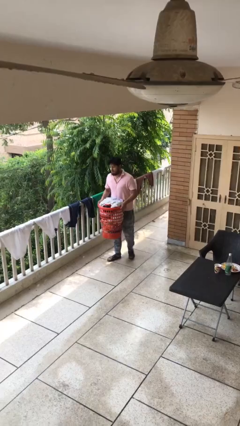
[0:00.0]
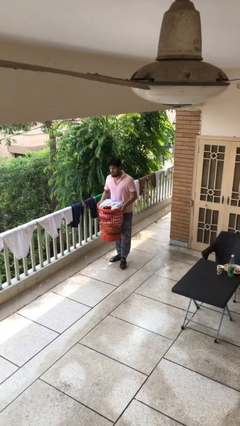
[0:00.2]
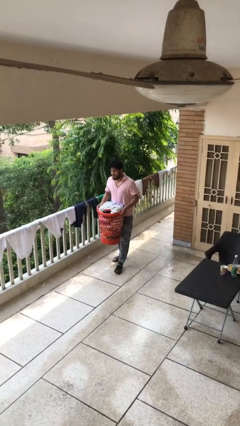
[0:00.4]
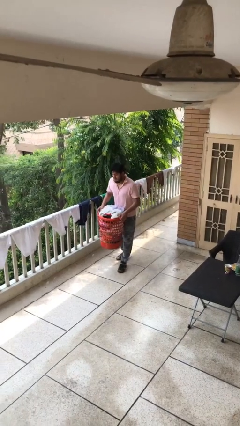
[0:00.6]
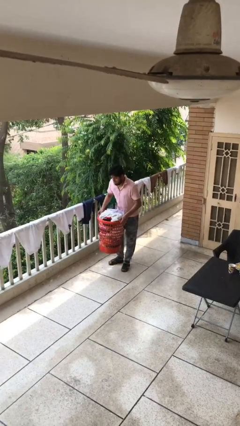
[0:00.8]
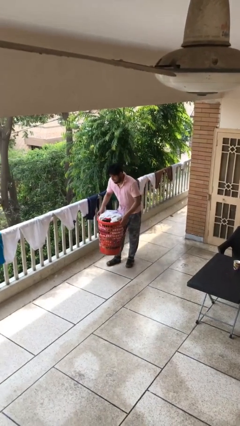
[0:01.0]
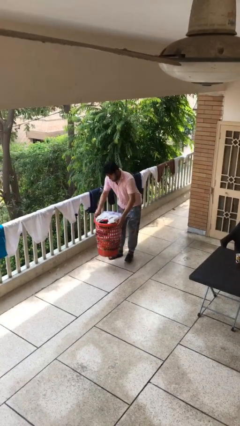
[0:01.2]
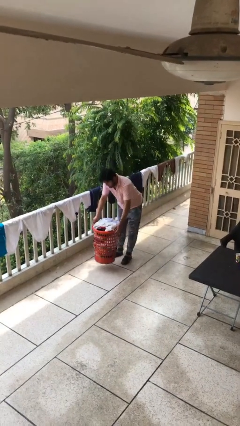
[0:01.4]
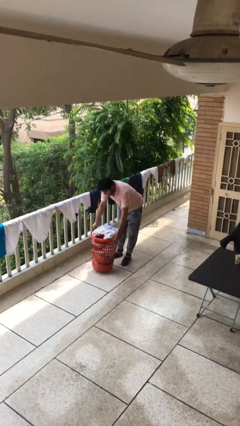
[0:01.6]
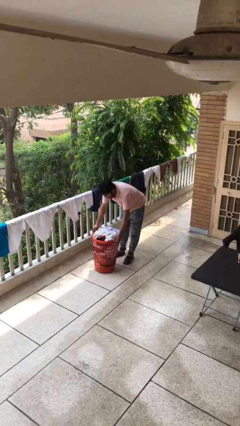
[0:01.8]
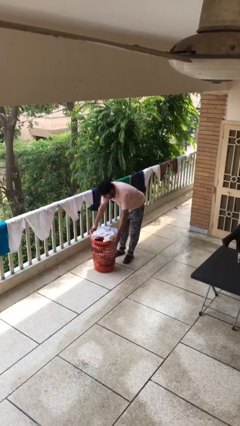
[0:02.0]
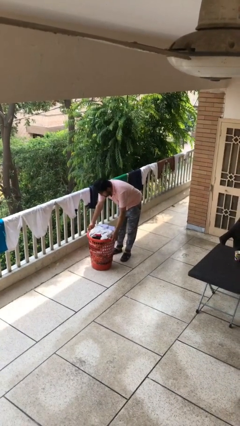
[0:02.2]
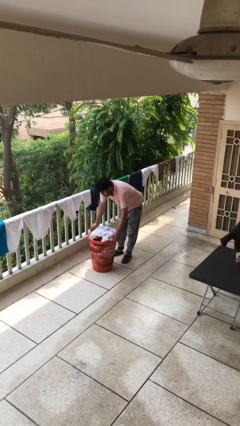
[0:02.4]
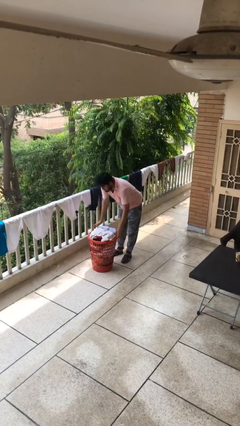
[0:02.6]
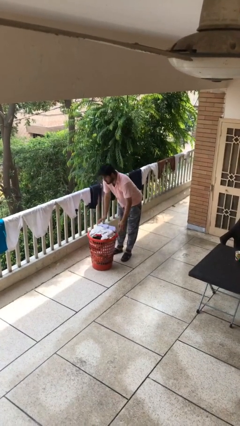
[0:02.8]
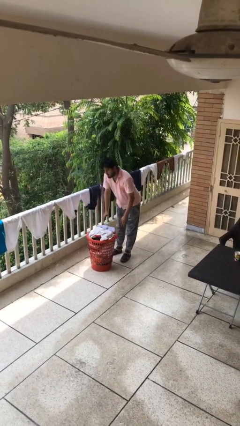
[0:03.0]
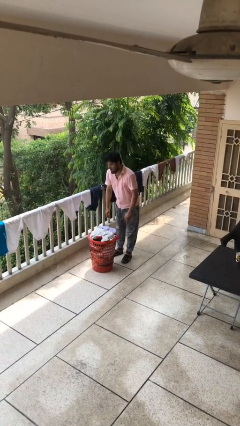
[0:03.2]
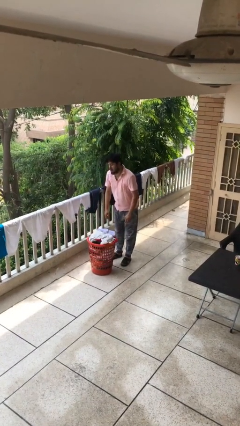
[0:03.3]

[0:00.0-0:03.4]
person puts down object on floor

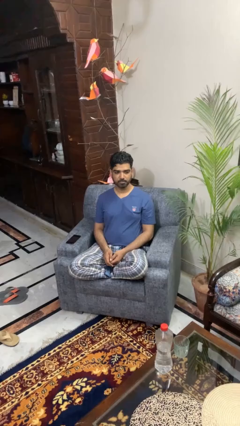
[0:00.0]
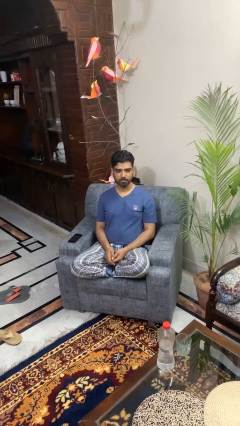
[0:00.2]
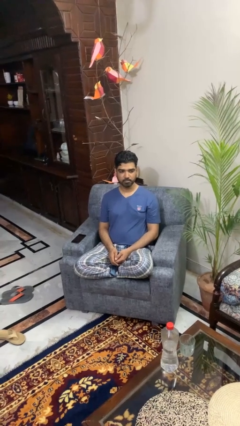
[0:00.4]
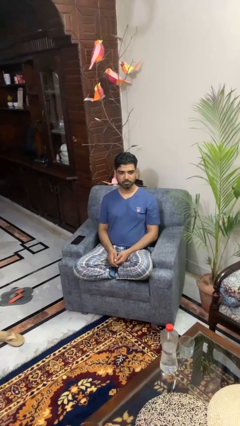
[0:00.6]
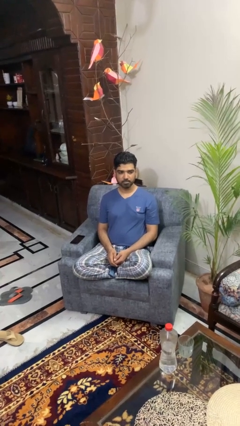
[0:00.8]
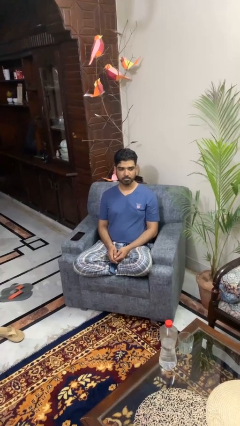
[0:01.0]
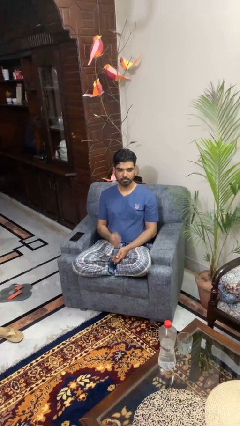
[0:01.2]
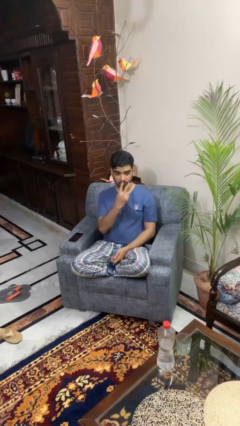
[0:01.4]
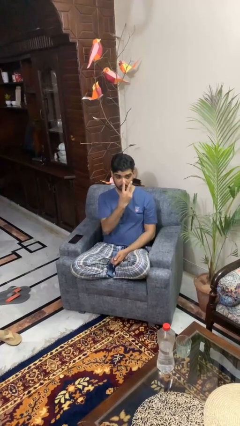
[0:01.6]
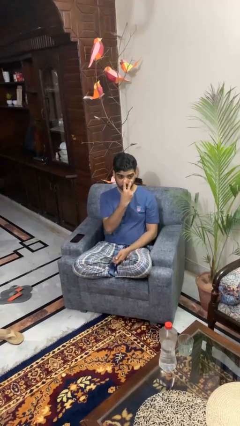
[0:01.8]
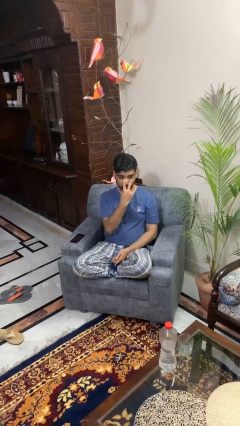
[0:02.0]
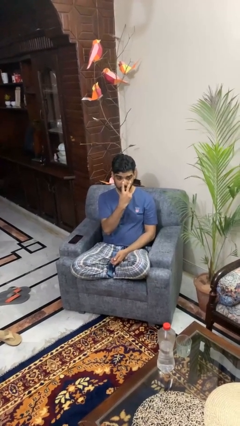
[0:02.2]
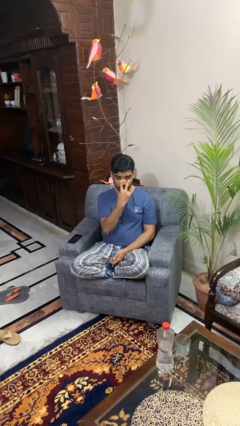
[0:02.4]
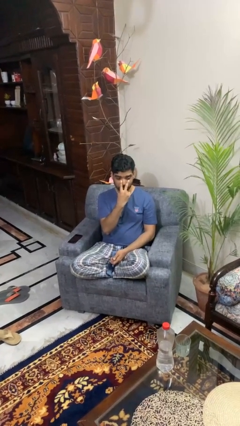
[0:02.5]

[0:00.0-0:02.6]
person gestures watch closely

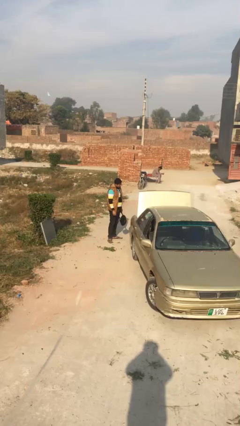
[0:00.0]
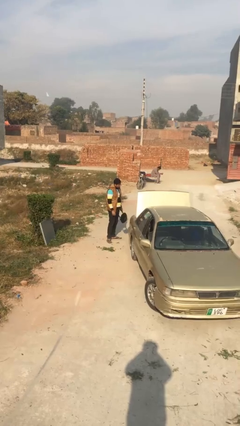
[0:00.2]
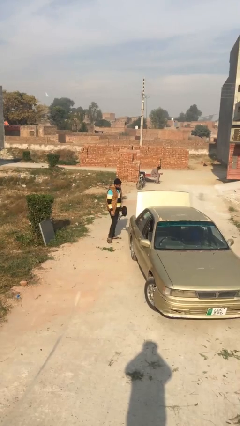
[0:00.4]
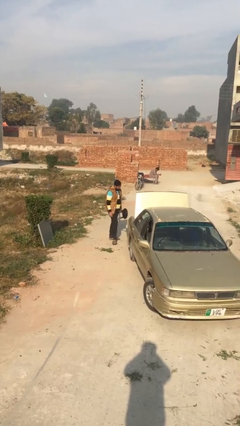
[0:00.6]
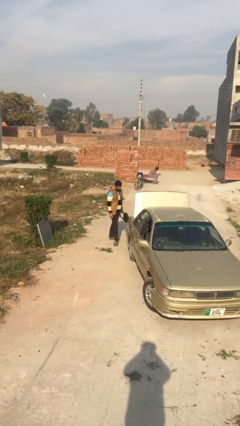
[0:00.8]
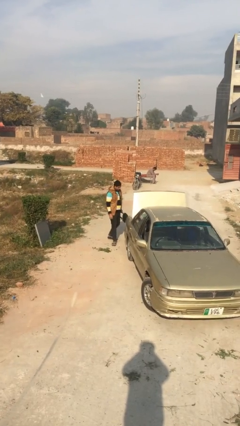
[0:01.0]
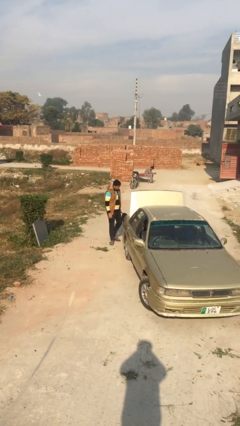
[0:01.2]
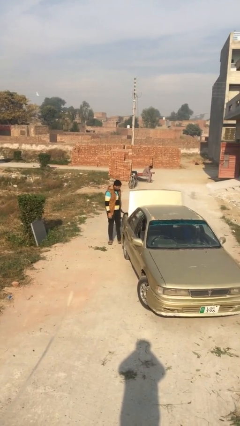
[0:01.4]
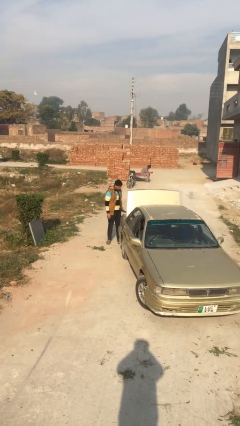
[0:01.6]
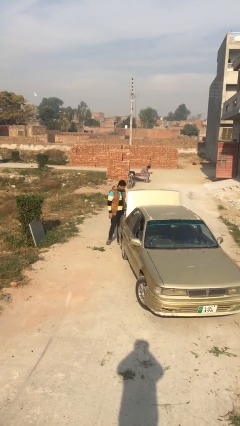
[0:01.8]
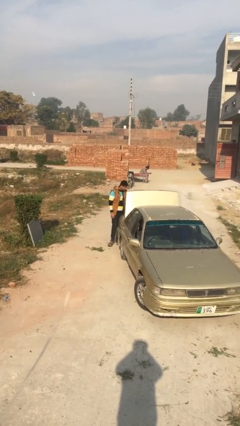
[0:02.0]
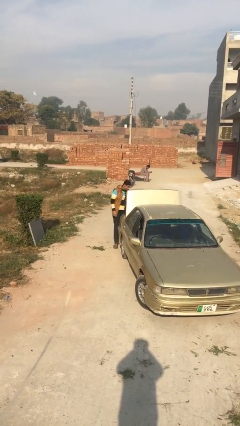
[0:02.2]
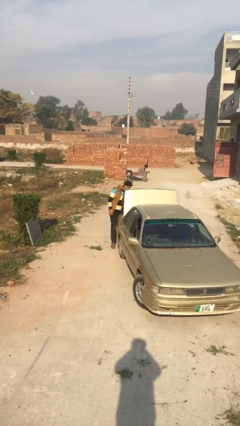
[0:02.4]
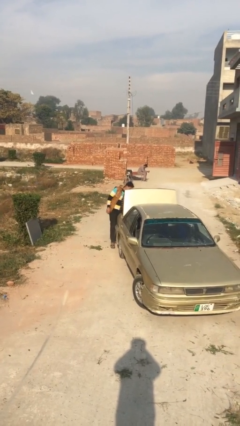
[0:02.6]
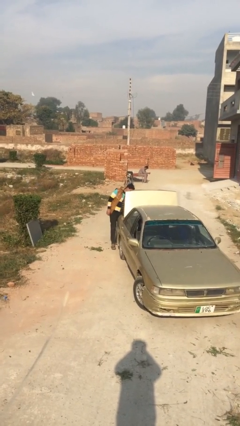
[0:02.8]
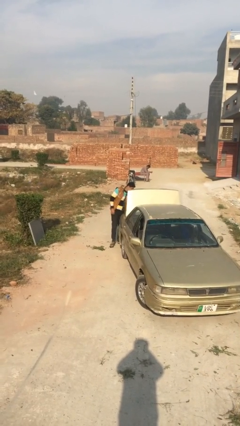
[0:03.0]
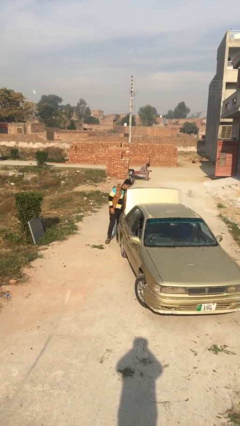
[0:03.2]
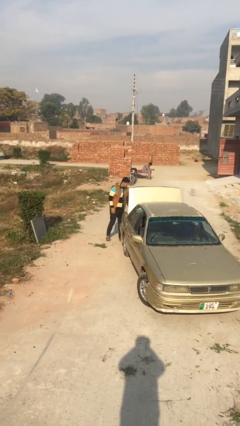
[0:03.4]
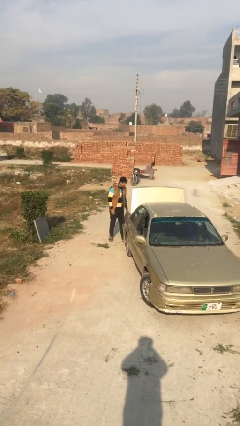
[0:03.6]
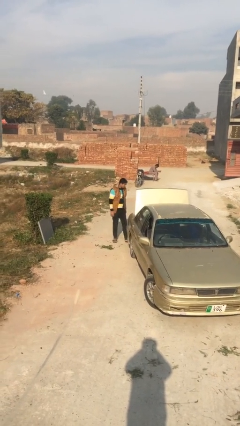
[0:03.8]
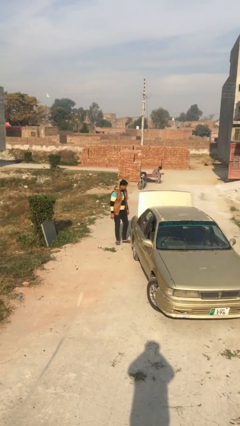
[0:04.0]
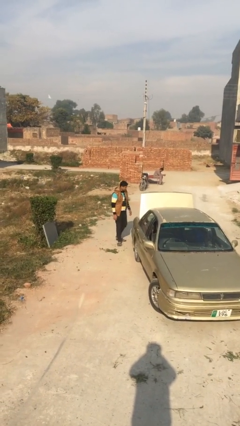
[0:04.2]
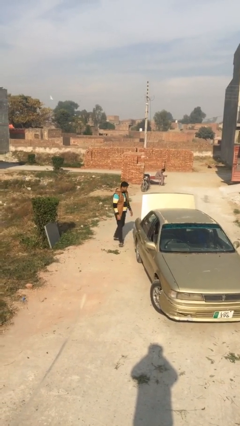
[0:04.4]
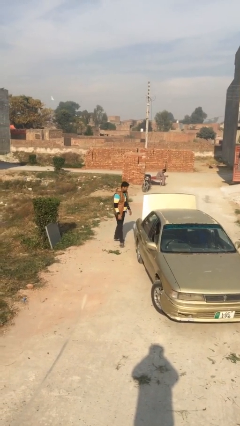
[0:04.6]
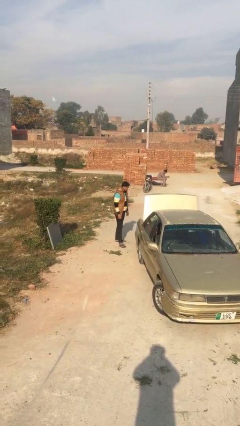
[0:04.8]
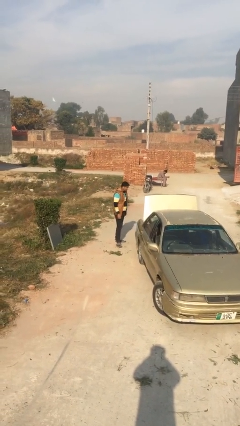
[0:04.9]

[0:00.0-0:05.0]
person loads car

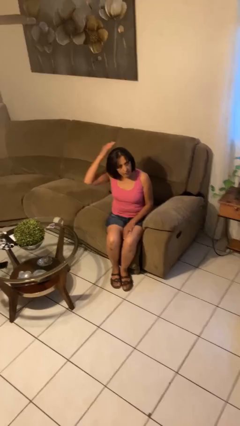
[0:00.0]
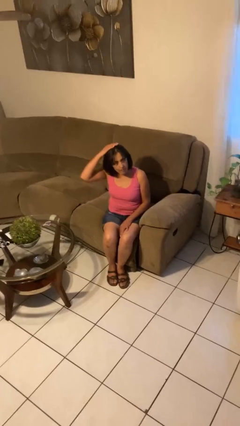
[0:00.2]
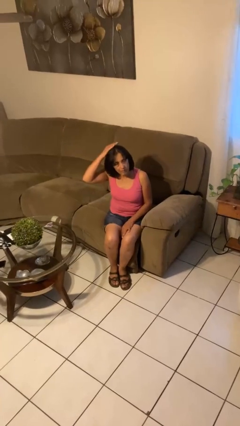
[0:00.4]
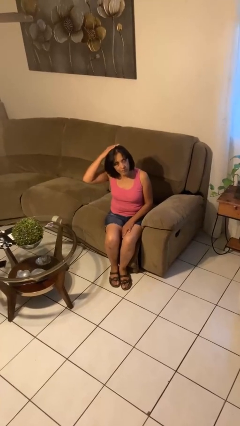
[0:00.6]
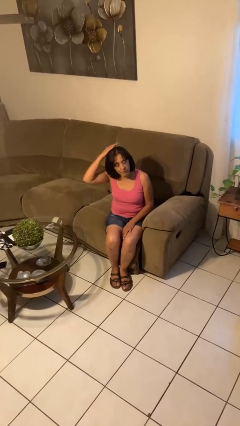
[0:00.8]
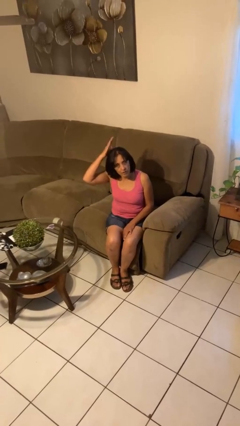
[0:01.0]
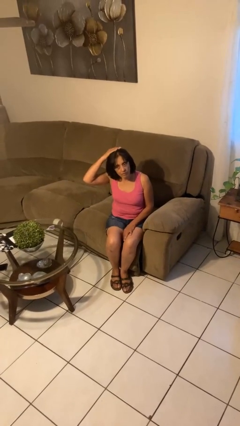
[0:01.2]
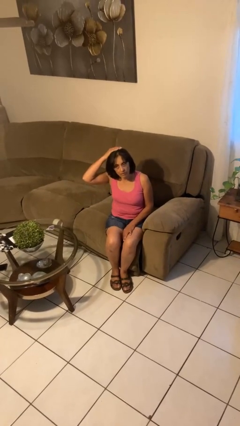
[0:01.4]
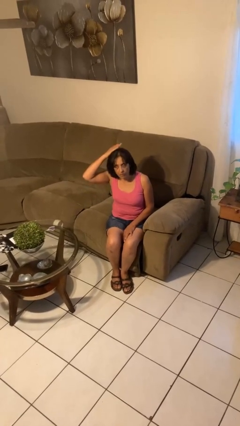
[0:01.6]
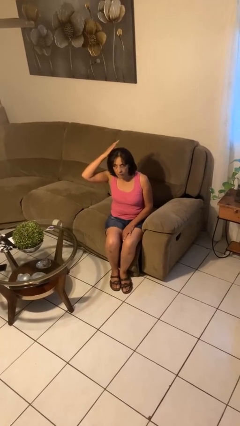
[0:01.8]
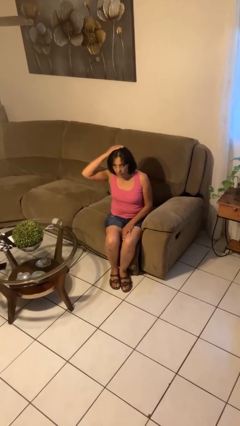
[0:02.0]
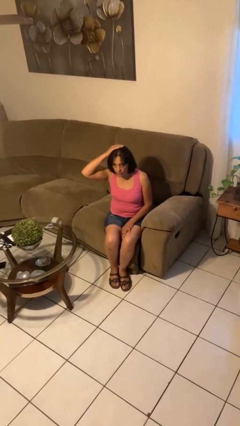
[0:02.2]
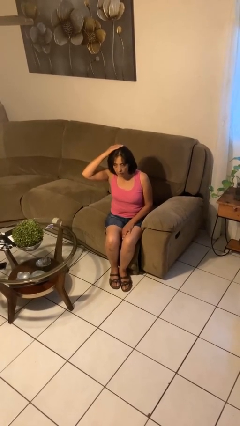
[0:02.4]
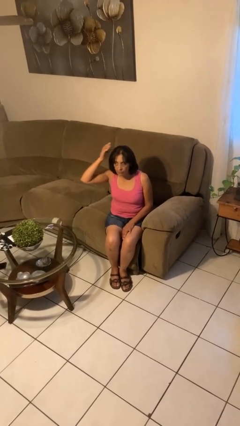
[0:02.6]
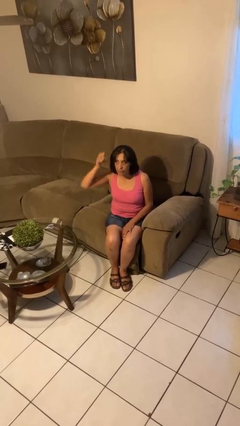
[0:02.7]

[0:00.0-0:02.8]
person pats head

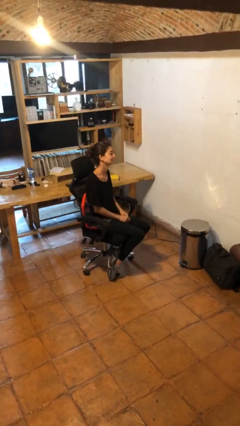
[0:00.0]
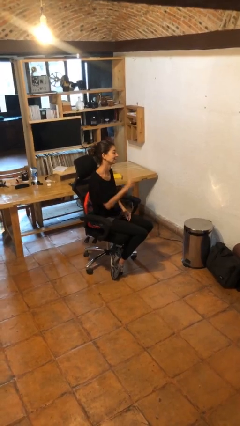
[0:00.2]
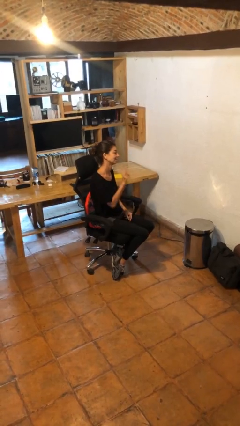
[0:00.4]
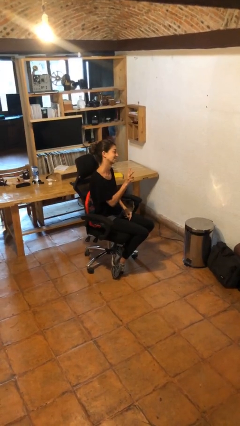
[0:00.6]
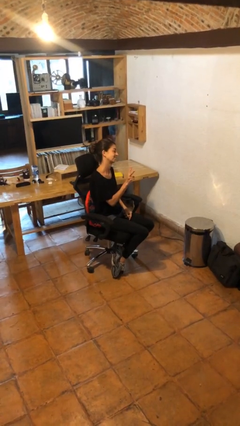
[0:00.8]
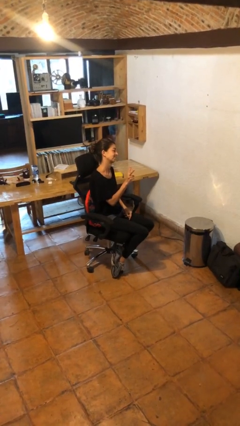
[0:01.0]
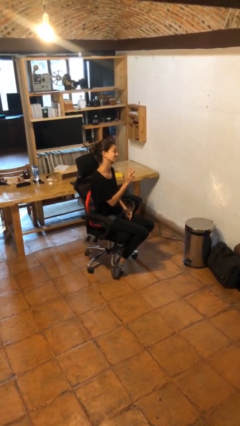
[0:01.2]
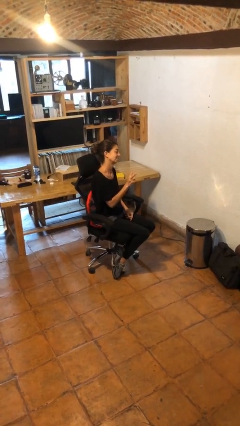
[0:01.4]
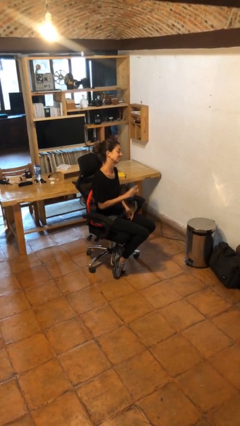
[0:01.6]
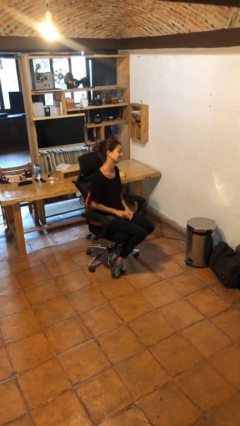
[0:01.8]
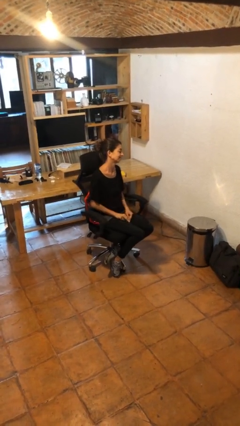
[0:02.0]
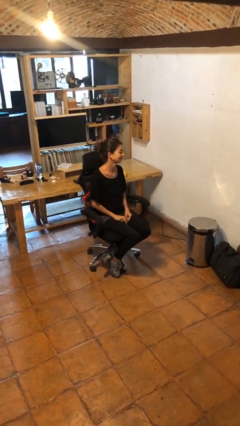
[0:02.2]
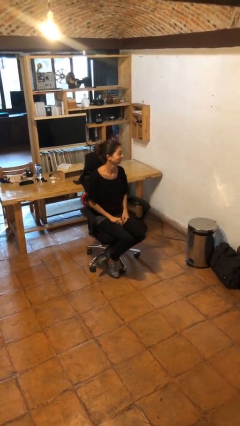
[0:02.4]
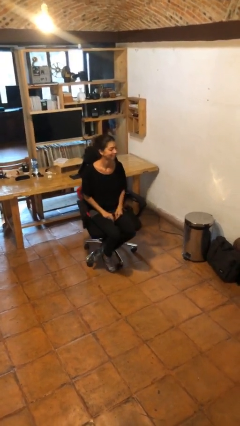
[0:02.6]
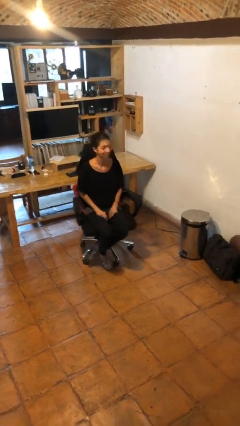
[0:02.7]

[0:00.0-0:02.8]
person gestures peace

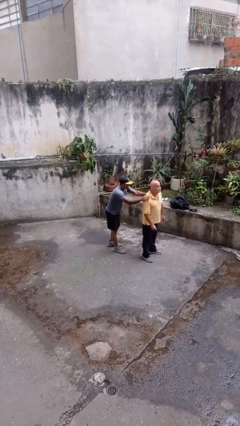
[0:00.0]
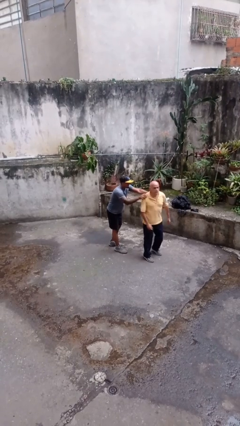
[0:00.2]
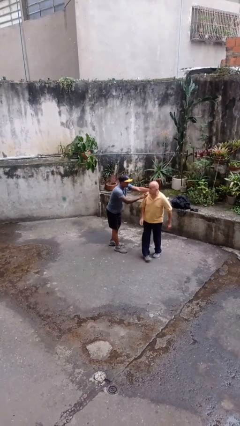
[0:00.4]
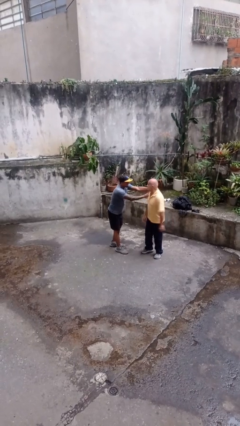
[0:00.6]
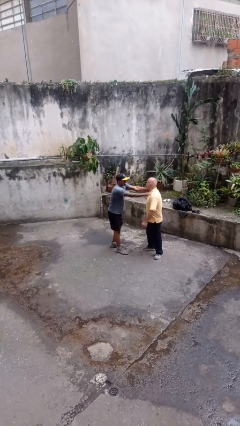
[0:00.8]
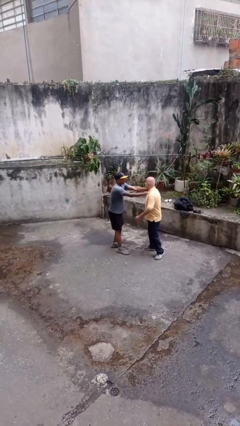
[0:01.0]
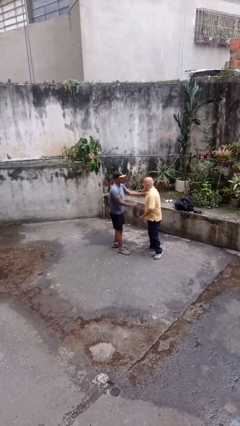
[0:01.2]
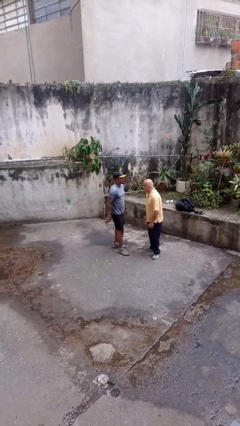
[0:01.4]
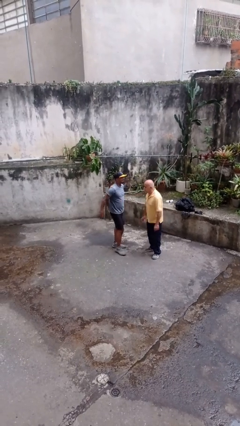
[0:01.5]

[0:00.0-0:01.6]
person spins person around
